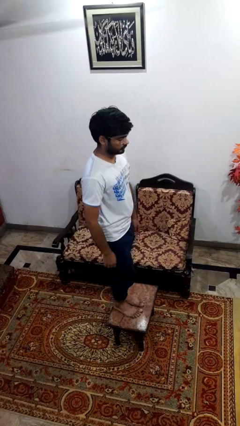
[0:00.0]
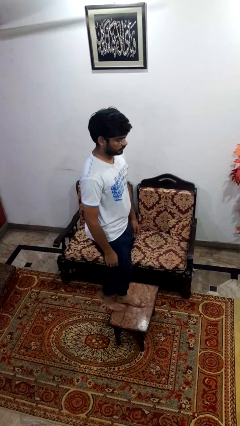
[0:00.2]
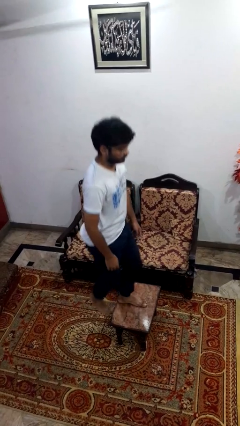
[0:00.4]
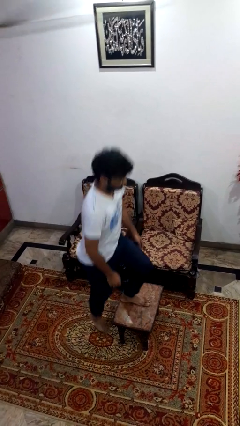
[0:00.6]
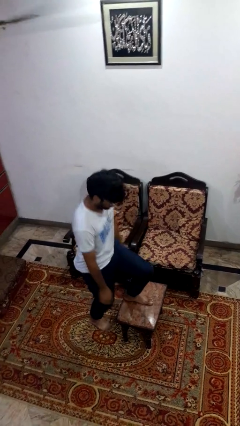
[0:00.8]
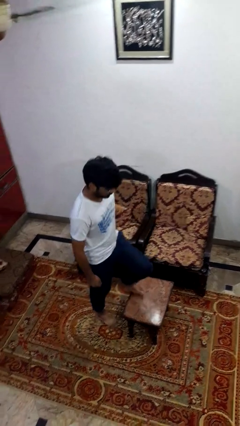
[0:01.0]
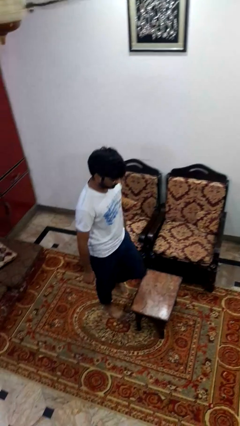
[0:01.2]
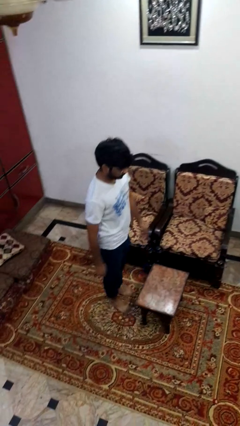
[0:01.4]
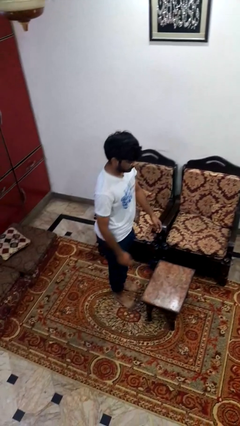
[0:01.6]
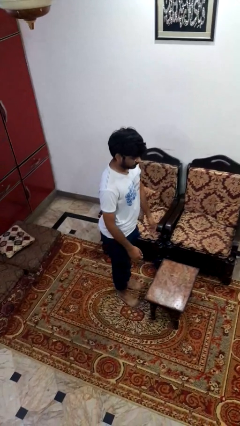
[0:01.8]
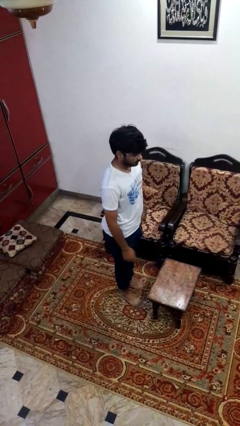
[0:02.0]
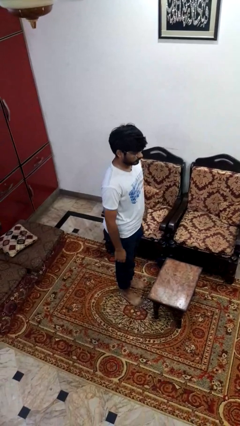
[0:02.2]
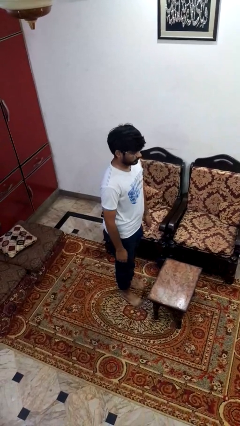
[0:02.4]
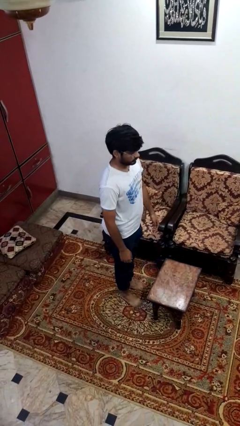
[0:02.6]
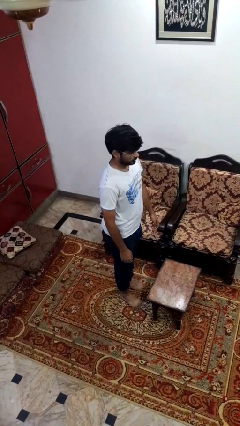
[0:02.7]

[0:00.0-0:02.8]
person climbs off table

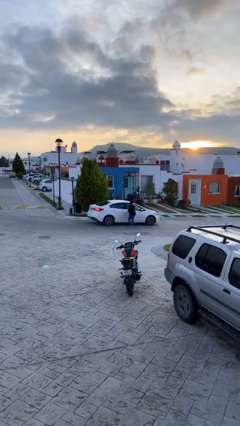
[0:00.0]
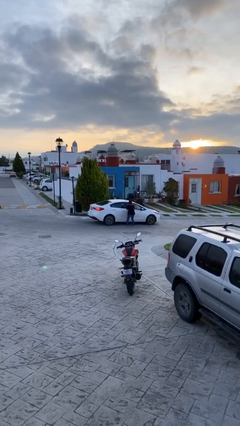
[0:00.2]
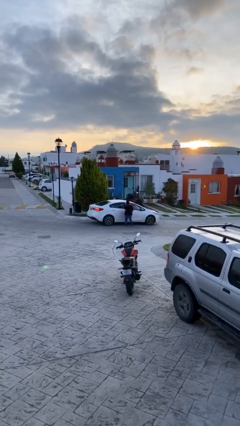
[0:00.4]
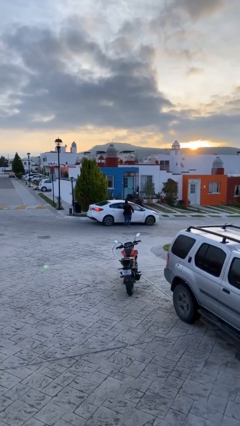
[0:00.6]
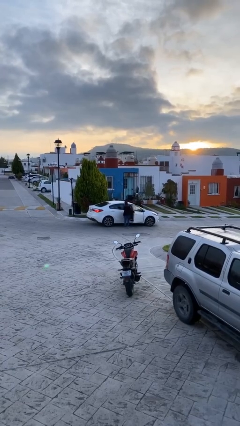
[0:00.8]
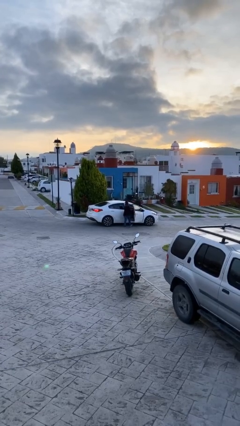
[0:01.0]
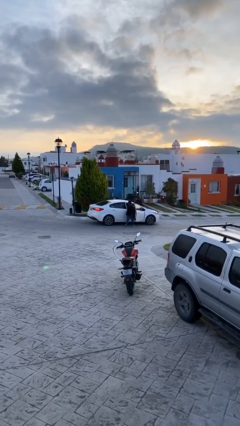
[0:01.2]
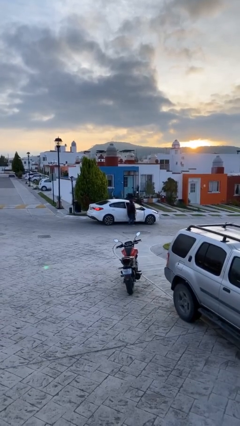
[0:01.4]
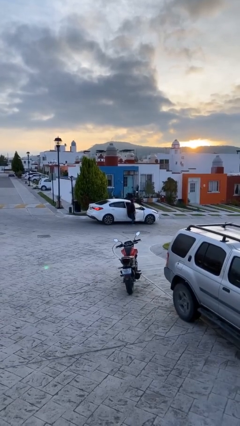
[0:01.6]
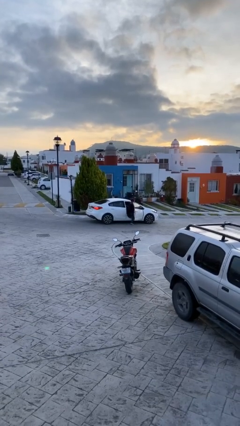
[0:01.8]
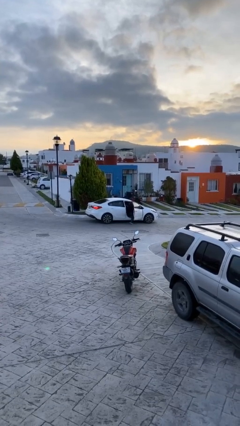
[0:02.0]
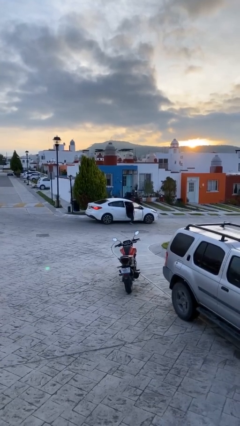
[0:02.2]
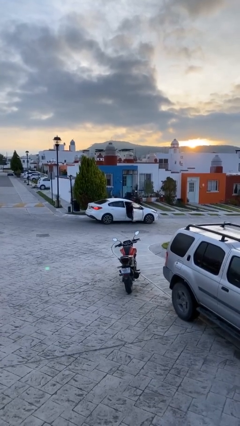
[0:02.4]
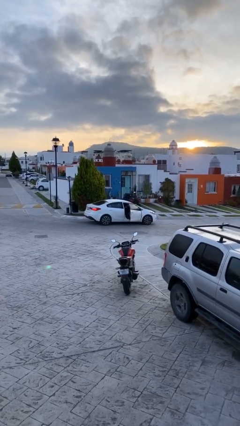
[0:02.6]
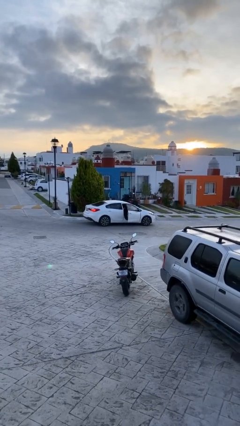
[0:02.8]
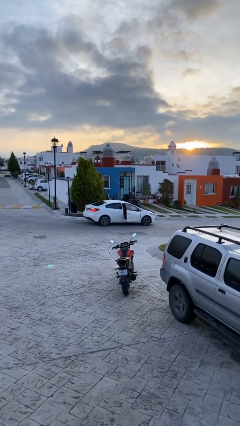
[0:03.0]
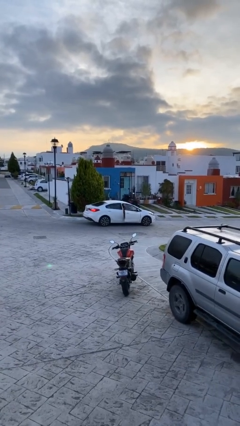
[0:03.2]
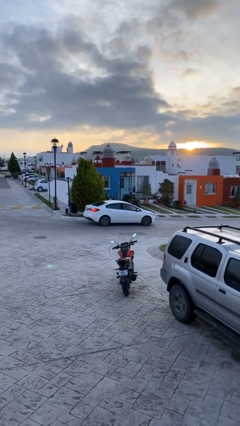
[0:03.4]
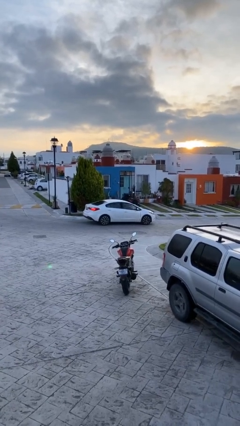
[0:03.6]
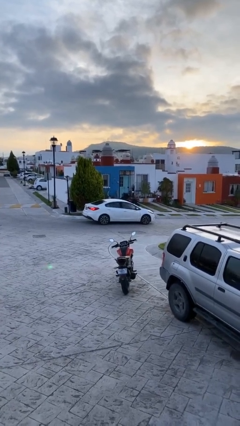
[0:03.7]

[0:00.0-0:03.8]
car picks up person

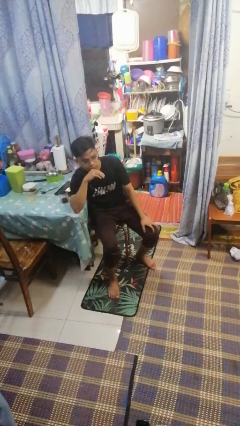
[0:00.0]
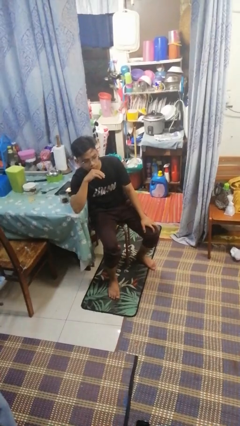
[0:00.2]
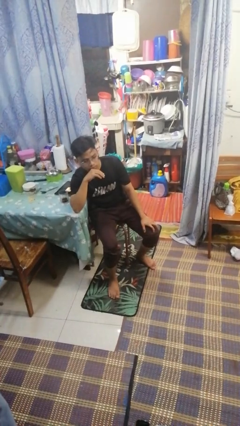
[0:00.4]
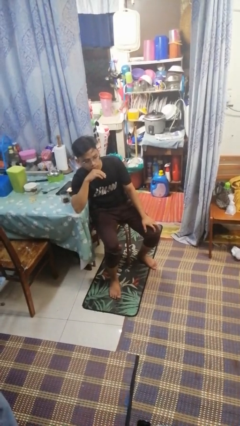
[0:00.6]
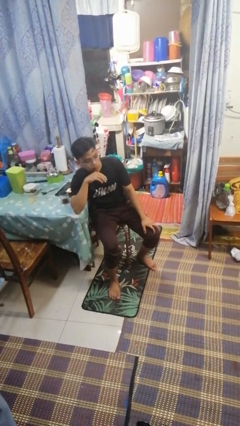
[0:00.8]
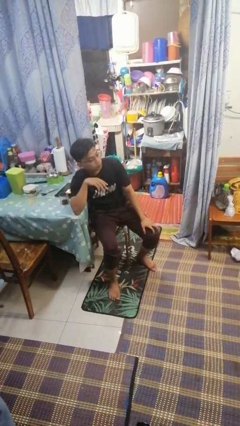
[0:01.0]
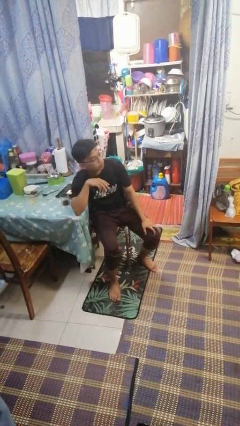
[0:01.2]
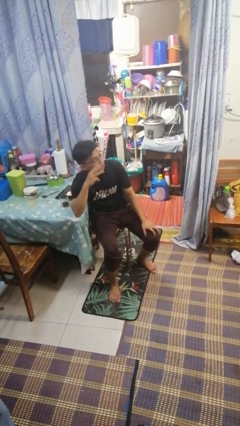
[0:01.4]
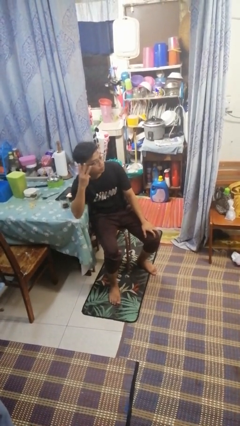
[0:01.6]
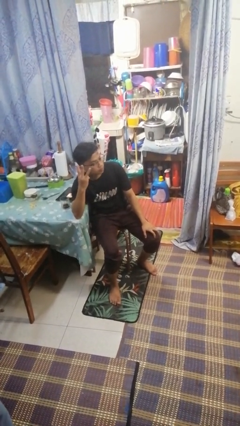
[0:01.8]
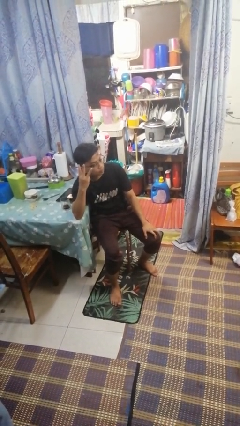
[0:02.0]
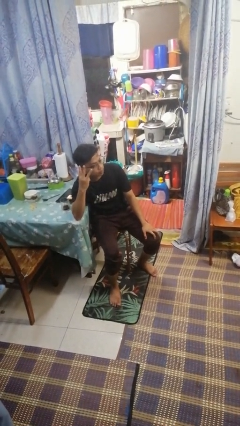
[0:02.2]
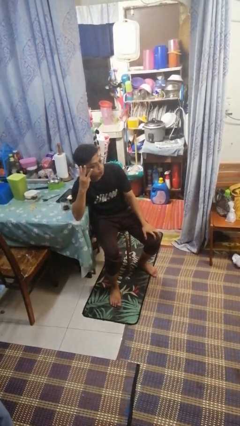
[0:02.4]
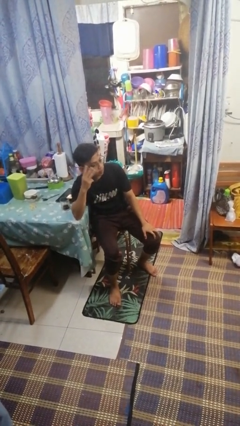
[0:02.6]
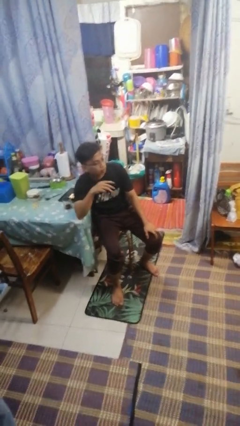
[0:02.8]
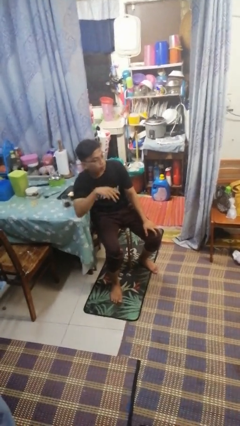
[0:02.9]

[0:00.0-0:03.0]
person gestures number three

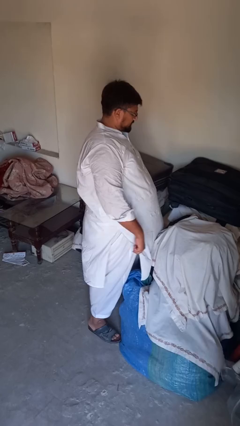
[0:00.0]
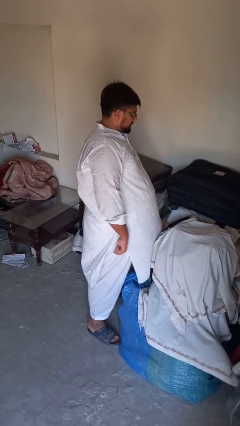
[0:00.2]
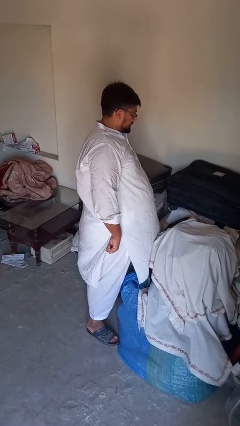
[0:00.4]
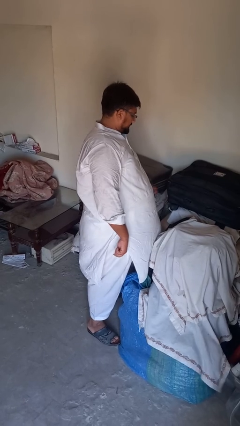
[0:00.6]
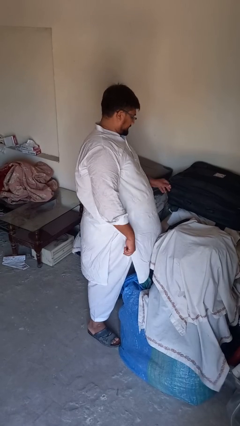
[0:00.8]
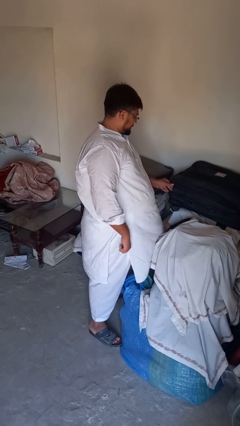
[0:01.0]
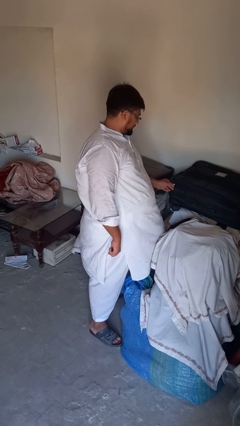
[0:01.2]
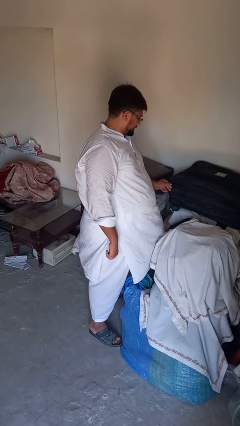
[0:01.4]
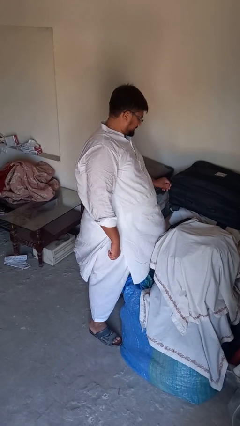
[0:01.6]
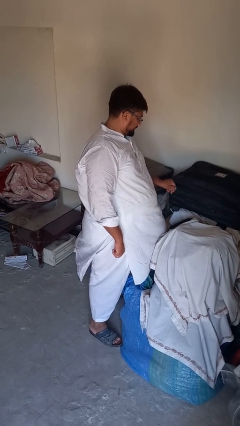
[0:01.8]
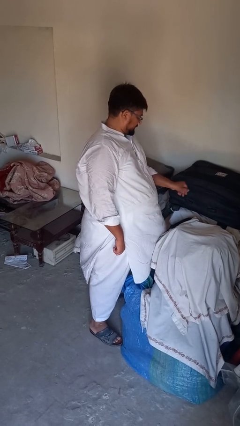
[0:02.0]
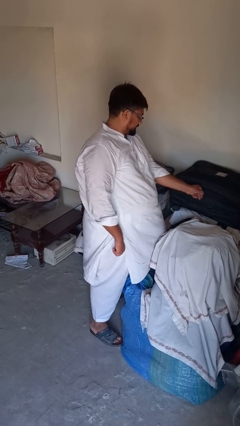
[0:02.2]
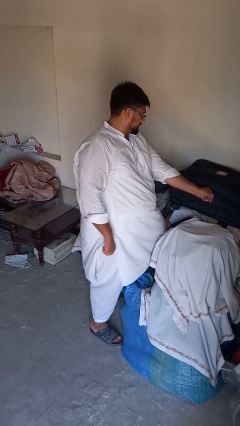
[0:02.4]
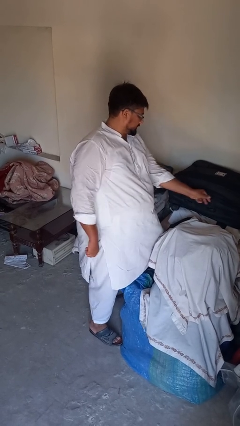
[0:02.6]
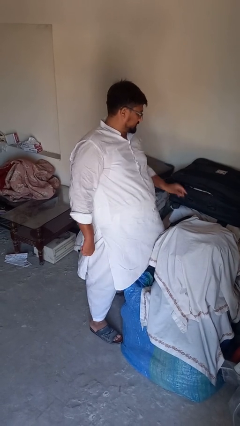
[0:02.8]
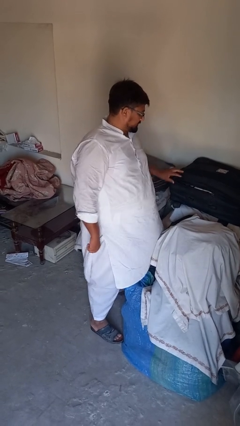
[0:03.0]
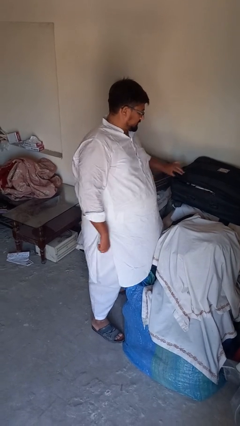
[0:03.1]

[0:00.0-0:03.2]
person opens suitcase

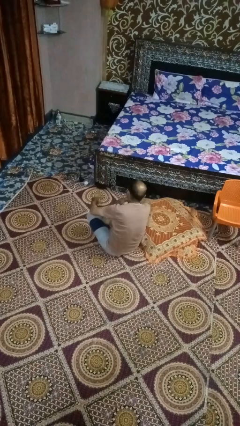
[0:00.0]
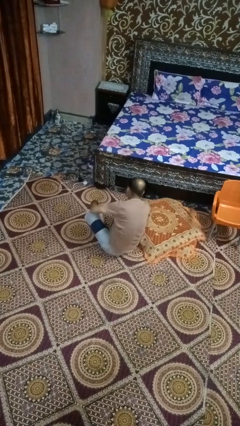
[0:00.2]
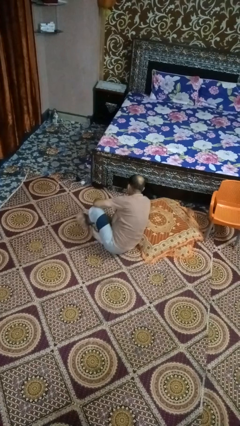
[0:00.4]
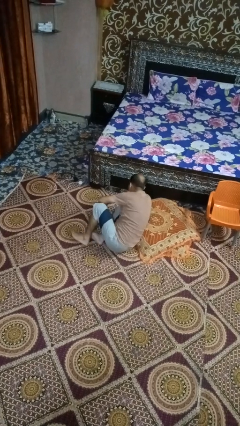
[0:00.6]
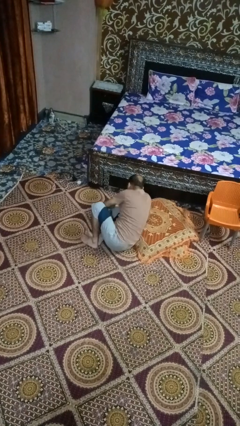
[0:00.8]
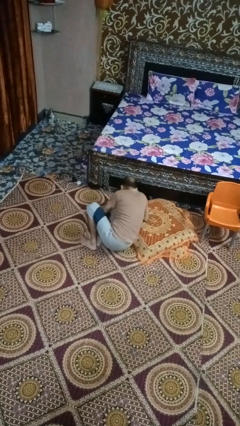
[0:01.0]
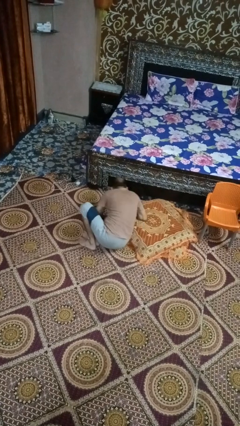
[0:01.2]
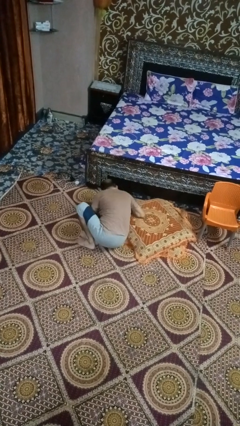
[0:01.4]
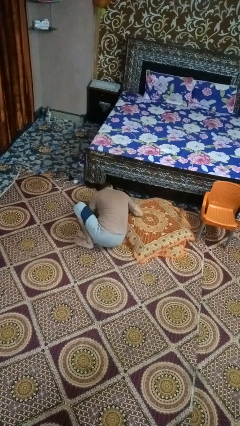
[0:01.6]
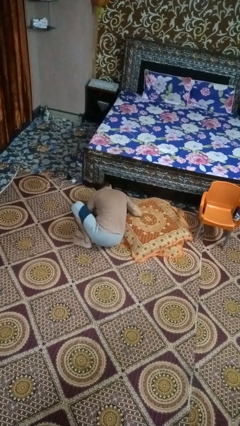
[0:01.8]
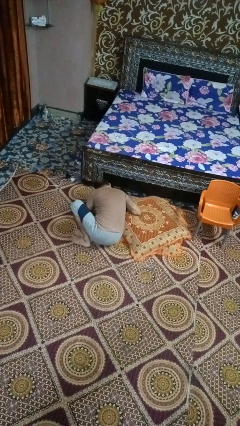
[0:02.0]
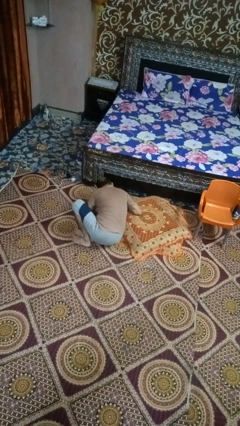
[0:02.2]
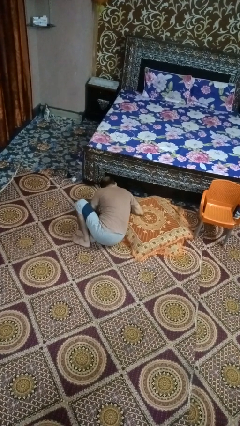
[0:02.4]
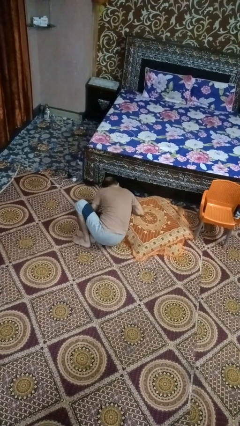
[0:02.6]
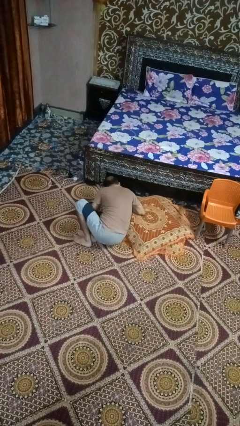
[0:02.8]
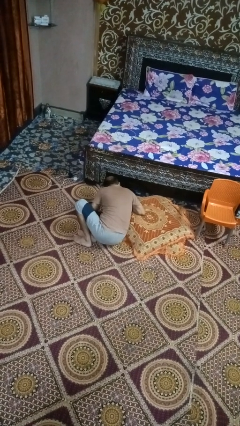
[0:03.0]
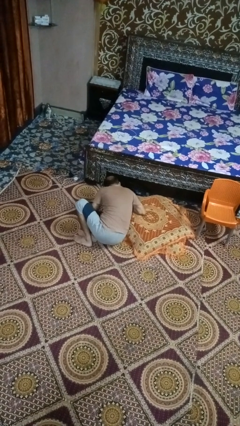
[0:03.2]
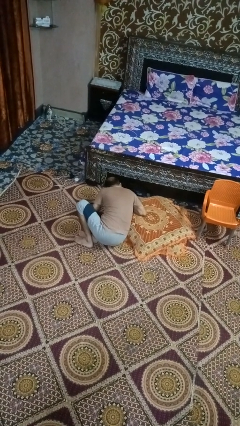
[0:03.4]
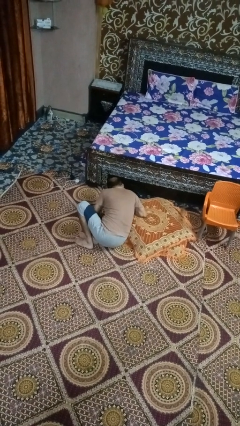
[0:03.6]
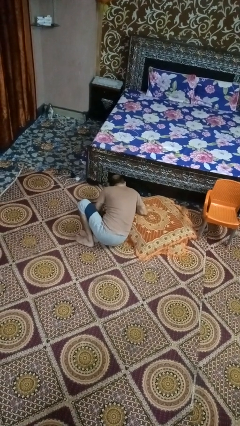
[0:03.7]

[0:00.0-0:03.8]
person searches under bed

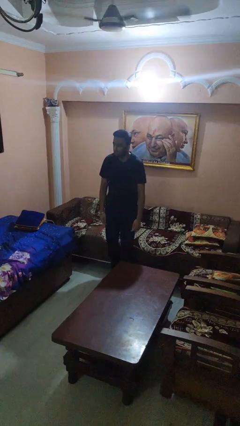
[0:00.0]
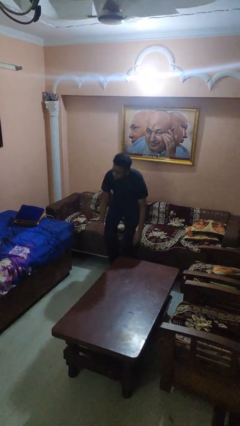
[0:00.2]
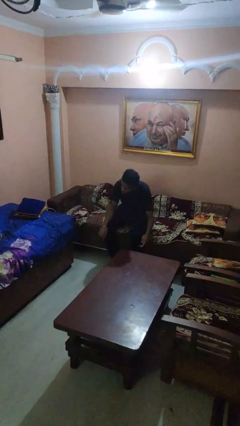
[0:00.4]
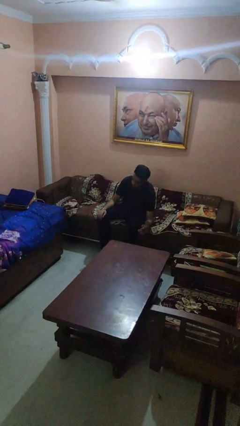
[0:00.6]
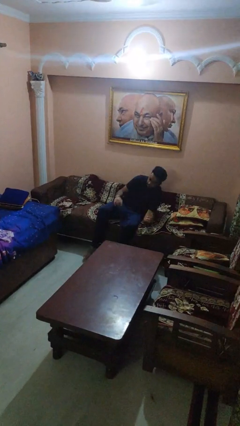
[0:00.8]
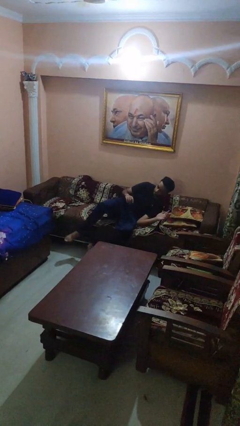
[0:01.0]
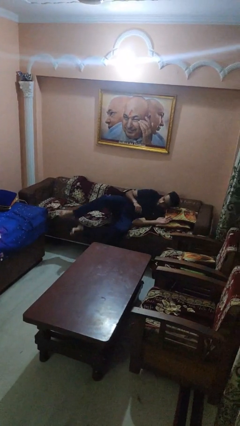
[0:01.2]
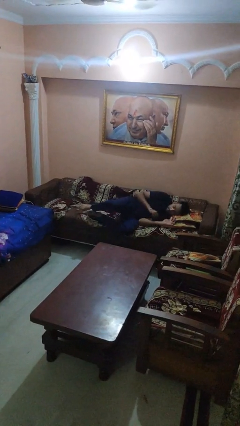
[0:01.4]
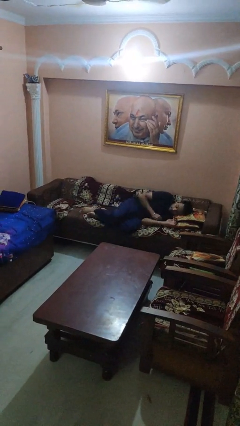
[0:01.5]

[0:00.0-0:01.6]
person lies down on couch
